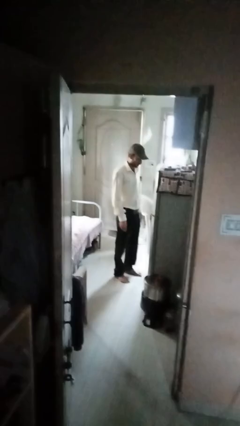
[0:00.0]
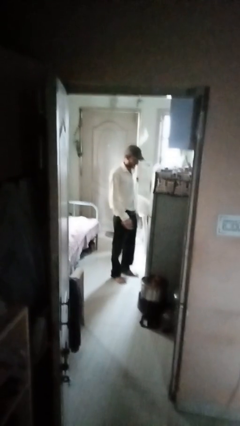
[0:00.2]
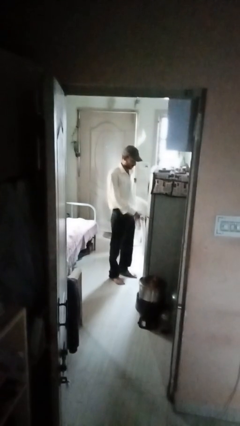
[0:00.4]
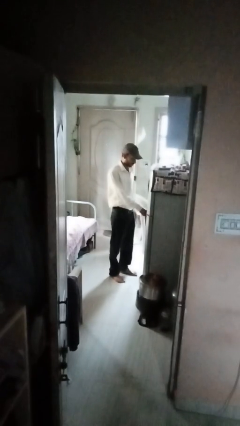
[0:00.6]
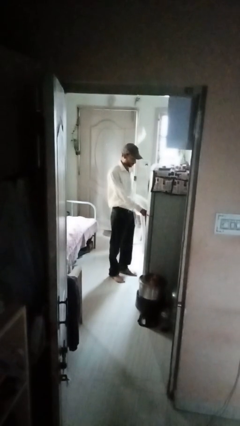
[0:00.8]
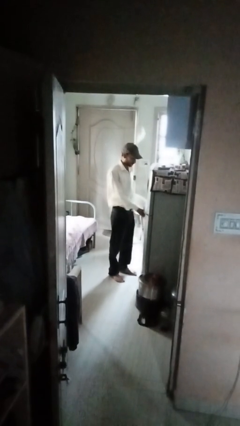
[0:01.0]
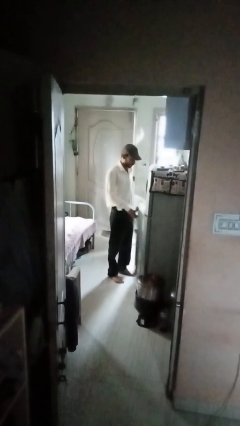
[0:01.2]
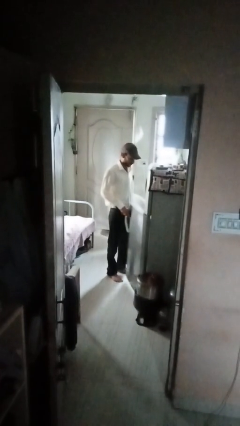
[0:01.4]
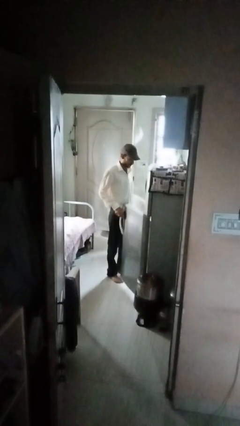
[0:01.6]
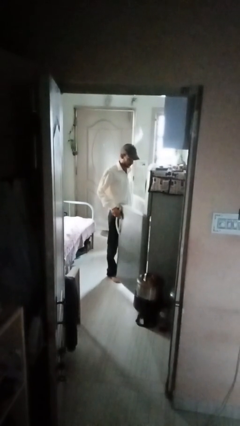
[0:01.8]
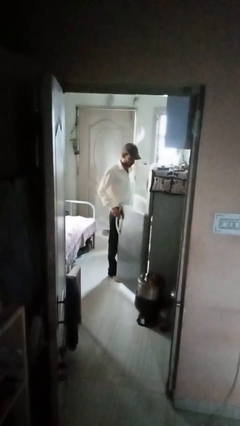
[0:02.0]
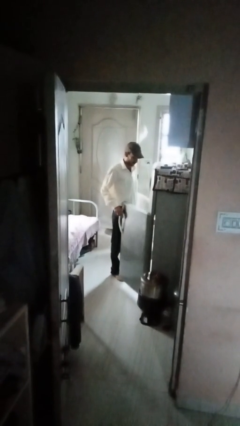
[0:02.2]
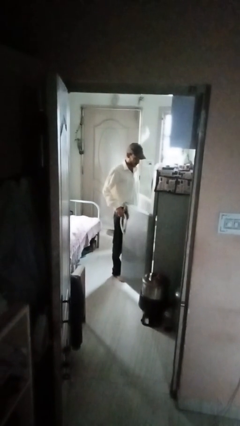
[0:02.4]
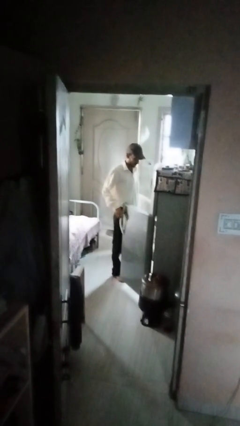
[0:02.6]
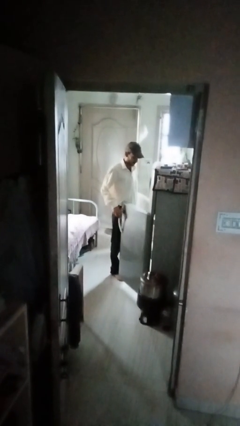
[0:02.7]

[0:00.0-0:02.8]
person opens refrigerator

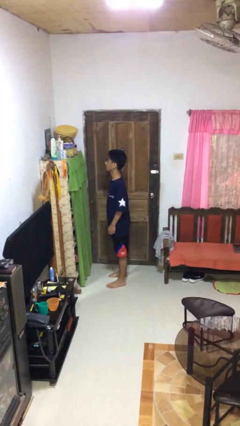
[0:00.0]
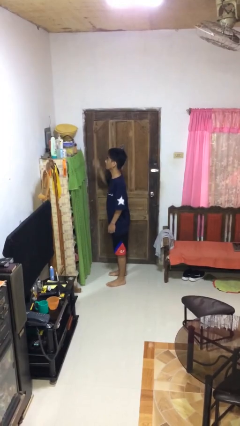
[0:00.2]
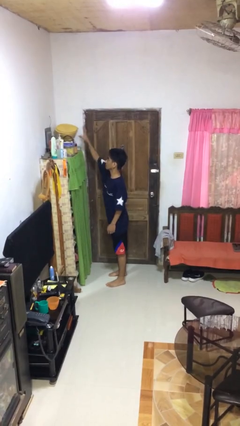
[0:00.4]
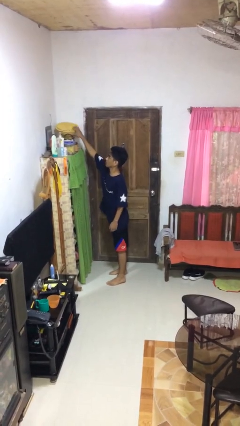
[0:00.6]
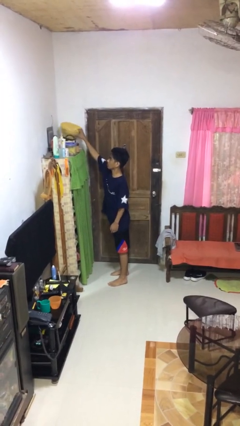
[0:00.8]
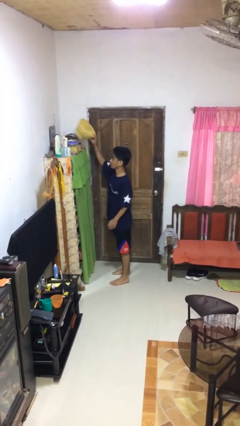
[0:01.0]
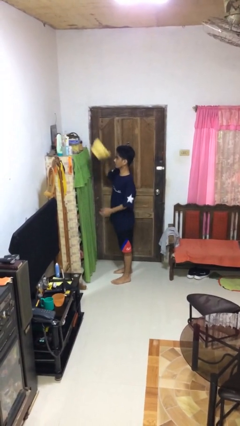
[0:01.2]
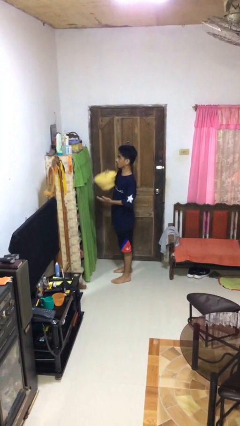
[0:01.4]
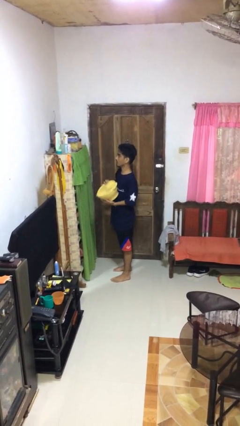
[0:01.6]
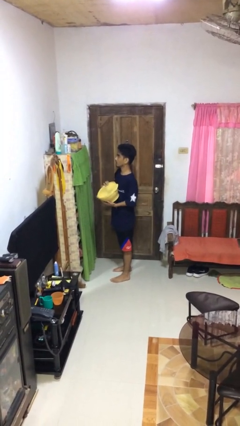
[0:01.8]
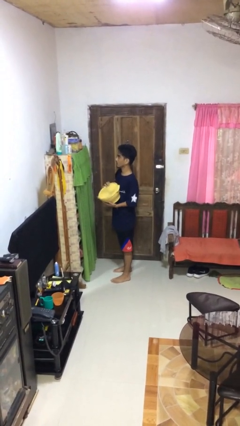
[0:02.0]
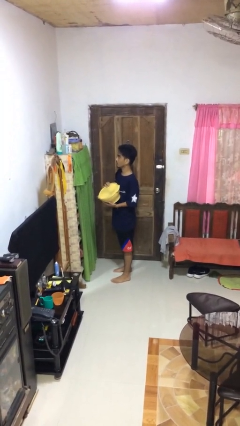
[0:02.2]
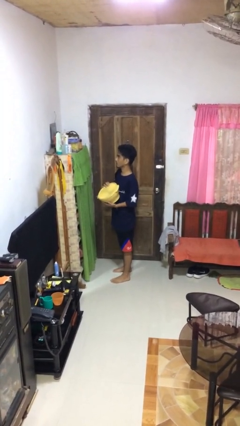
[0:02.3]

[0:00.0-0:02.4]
person picks up object from shelf

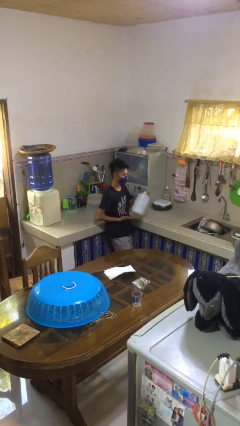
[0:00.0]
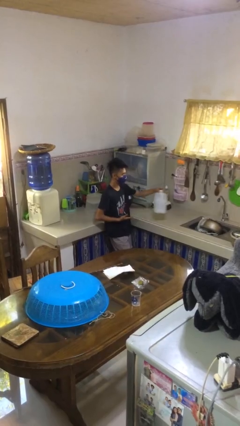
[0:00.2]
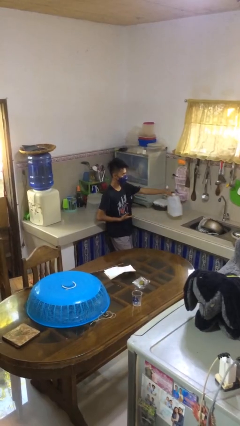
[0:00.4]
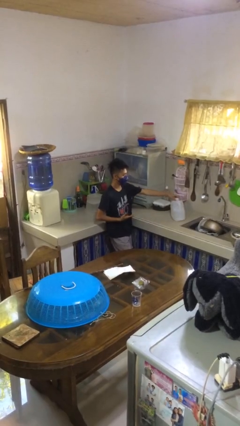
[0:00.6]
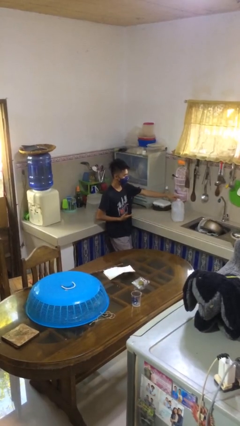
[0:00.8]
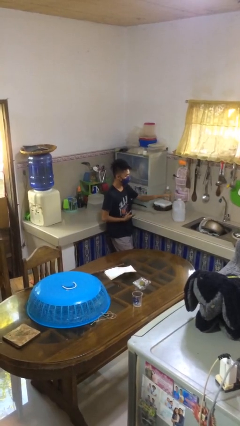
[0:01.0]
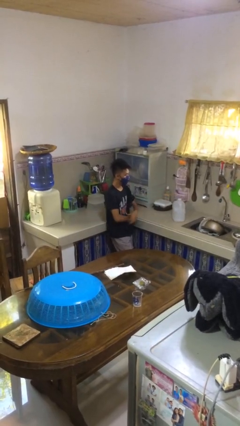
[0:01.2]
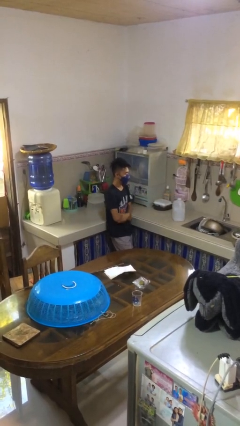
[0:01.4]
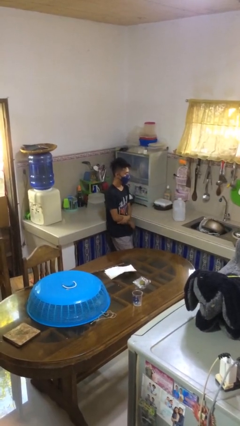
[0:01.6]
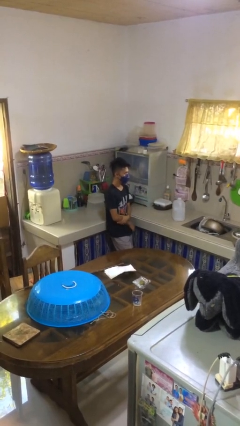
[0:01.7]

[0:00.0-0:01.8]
person puts down object on countertop

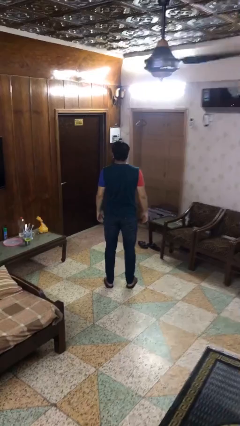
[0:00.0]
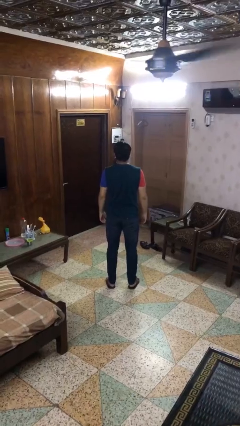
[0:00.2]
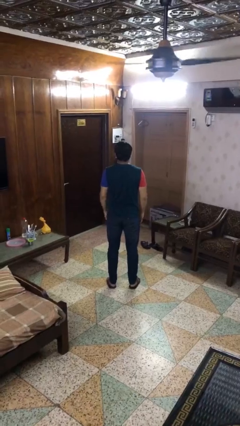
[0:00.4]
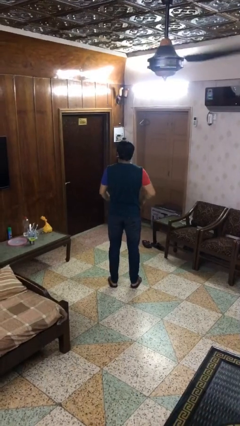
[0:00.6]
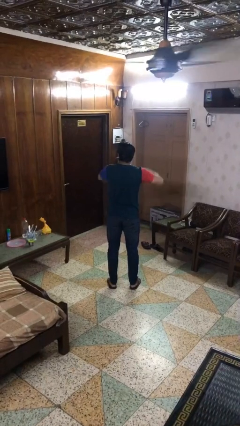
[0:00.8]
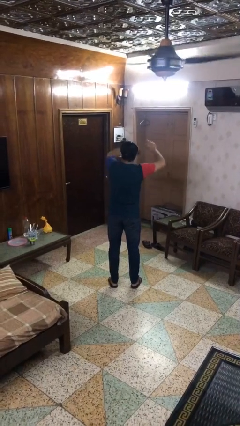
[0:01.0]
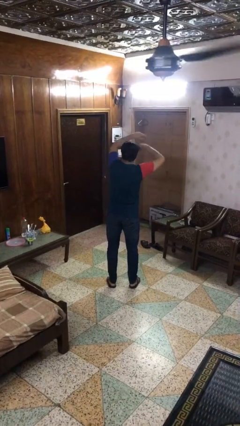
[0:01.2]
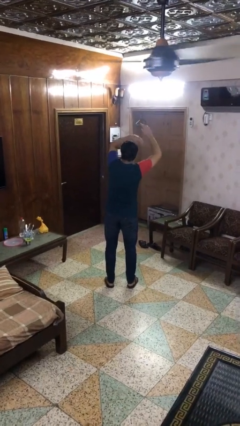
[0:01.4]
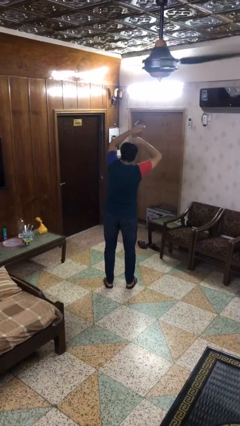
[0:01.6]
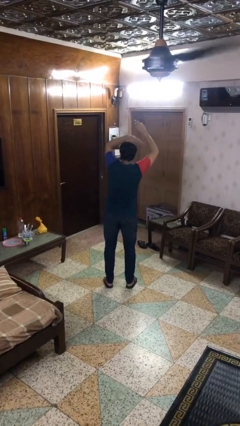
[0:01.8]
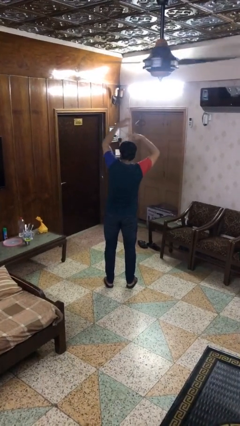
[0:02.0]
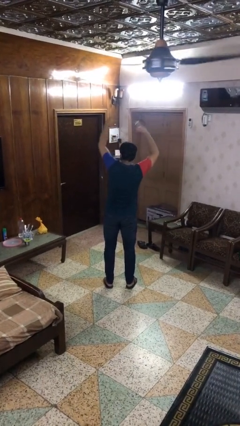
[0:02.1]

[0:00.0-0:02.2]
person dances in place

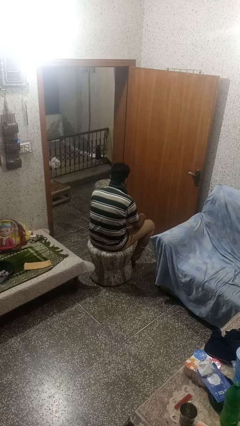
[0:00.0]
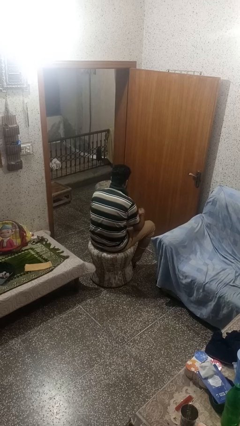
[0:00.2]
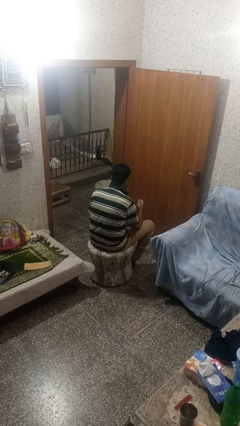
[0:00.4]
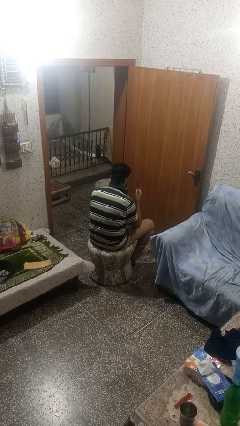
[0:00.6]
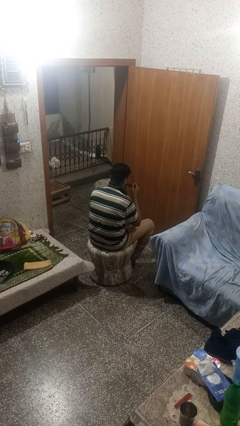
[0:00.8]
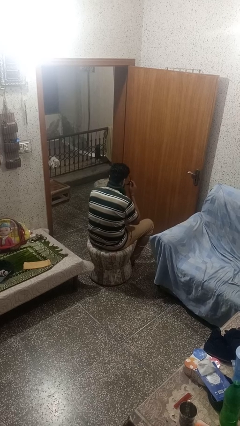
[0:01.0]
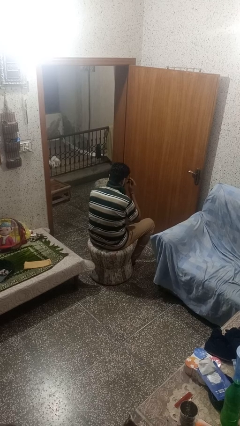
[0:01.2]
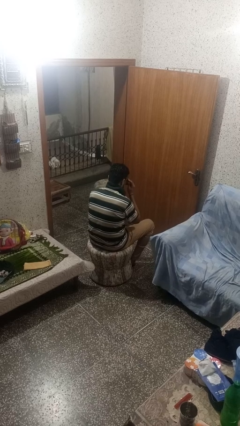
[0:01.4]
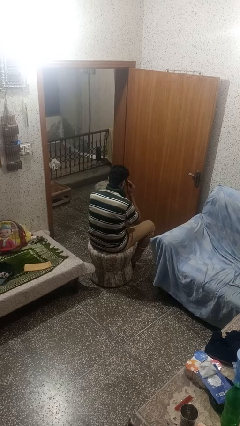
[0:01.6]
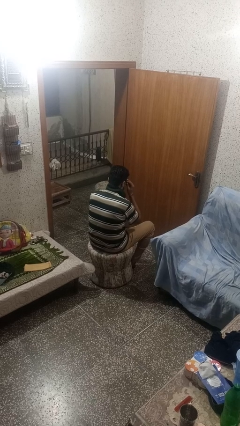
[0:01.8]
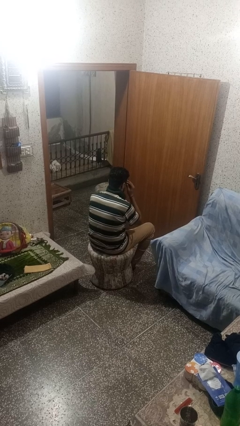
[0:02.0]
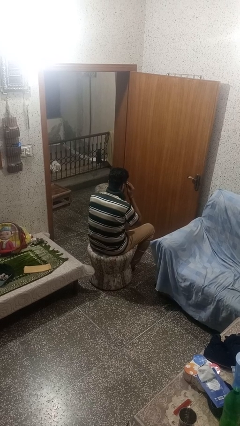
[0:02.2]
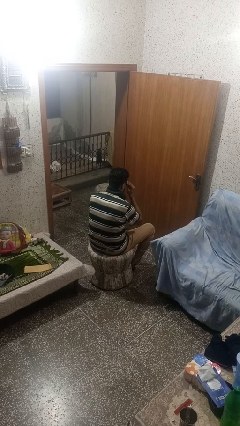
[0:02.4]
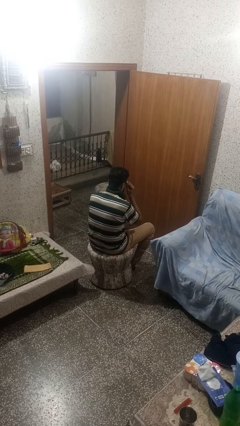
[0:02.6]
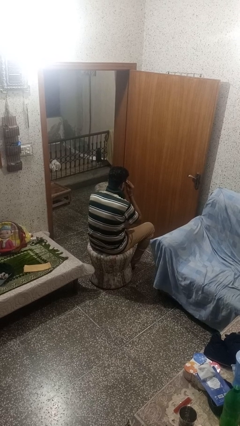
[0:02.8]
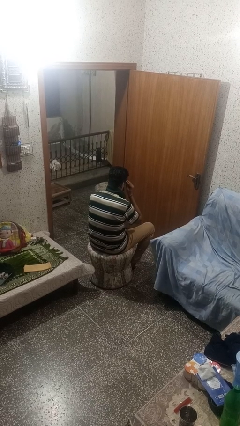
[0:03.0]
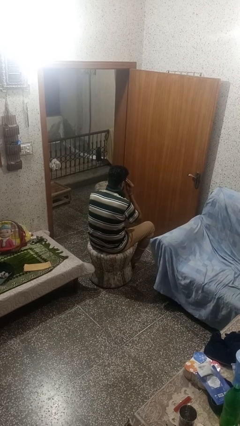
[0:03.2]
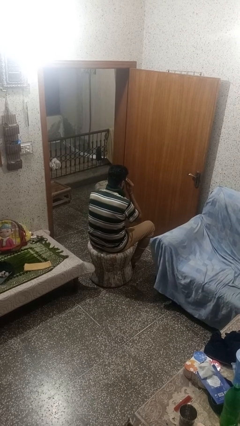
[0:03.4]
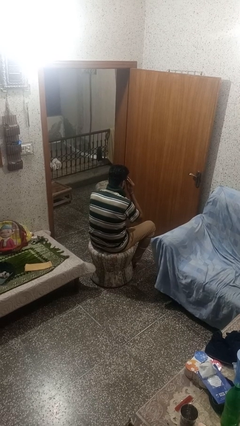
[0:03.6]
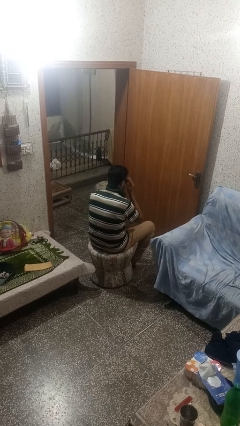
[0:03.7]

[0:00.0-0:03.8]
person puts on glasses

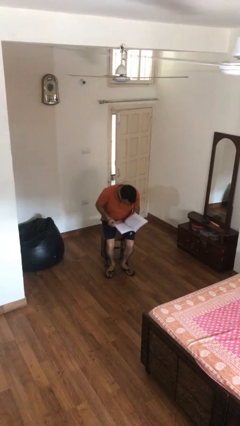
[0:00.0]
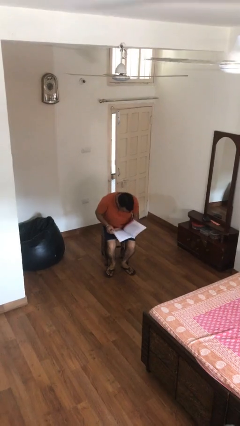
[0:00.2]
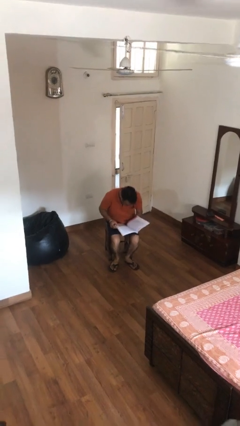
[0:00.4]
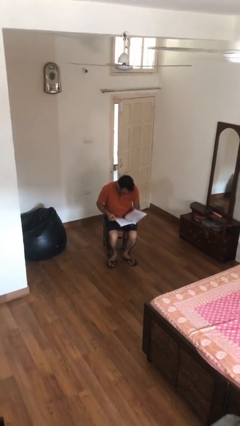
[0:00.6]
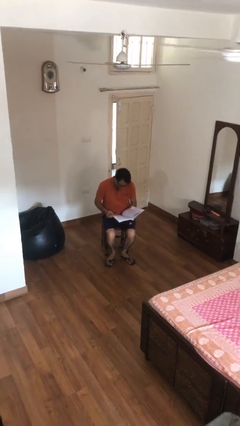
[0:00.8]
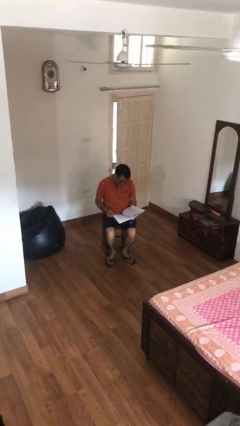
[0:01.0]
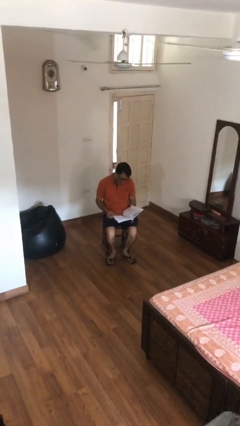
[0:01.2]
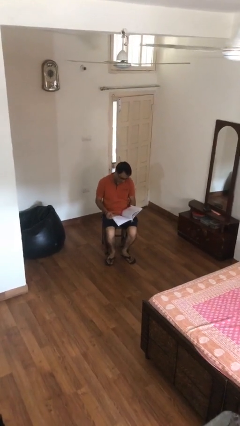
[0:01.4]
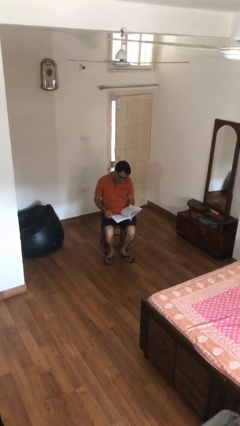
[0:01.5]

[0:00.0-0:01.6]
person sits down

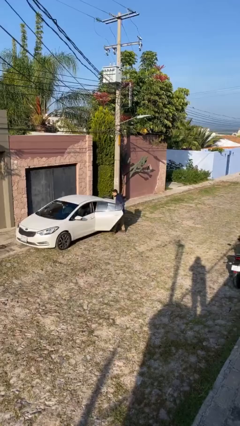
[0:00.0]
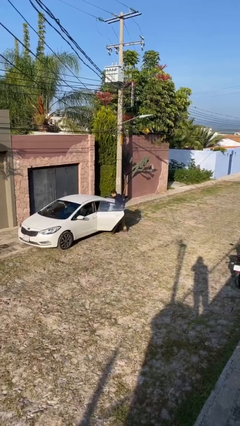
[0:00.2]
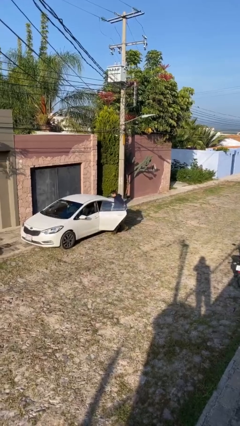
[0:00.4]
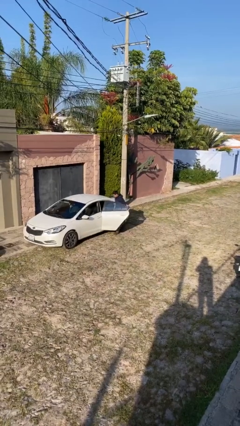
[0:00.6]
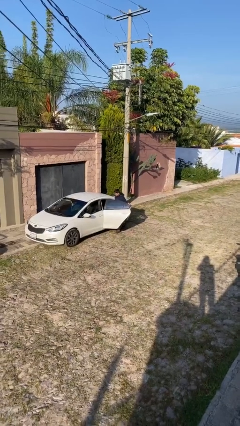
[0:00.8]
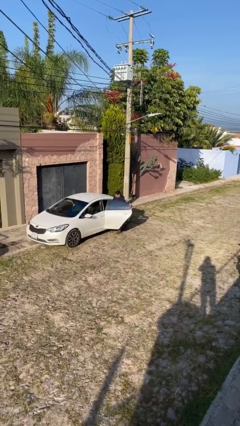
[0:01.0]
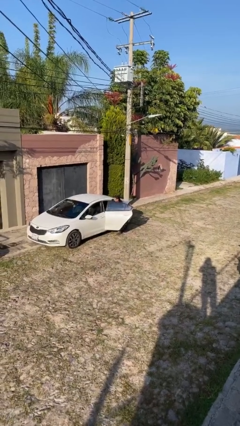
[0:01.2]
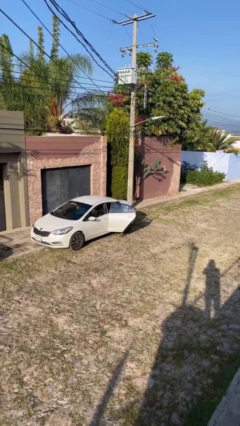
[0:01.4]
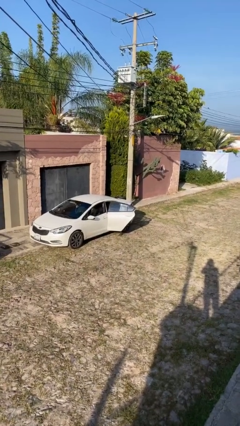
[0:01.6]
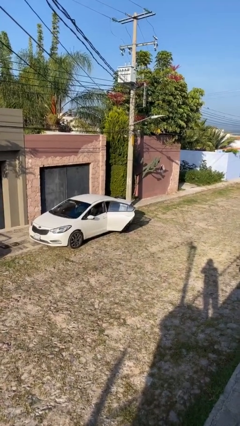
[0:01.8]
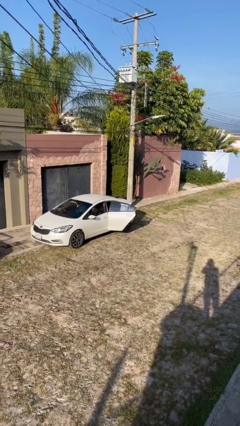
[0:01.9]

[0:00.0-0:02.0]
person enters car

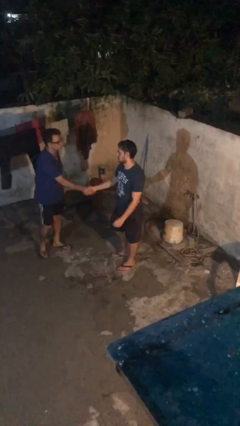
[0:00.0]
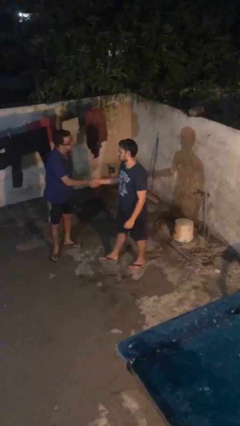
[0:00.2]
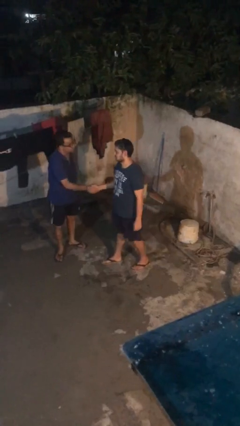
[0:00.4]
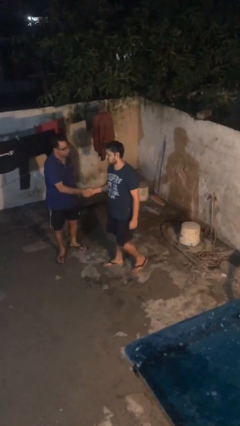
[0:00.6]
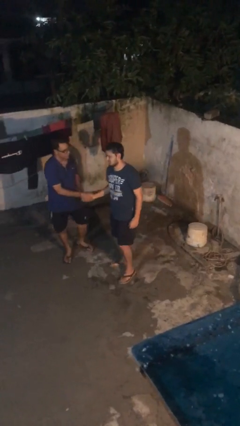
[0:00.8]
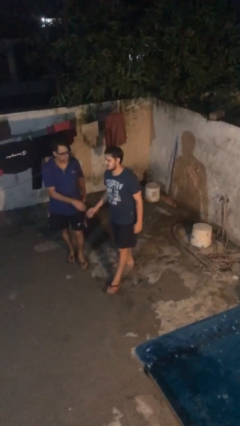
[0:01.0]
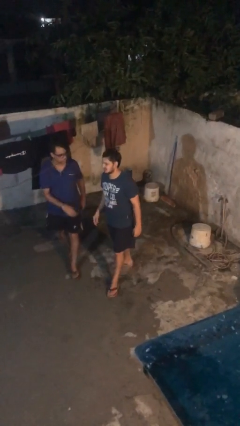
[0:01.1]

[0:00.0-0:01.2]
person shakes hand
